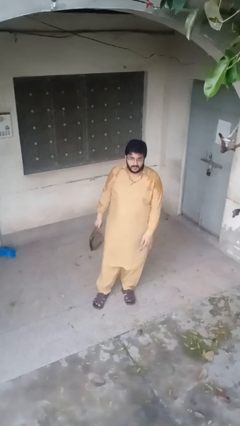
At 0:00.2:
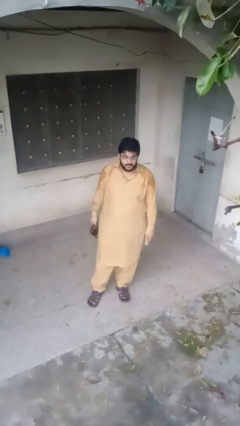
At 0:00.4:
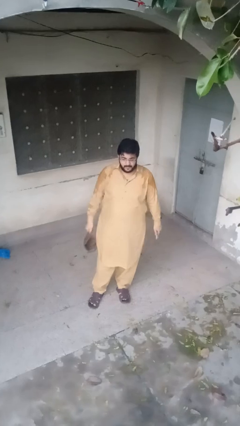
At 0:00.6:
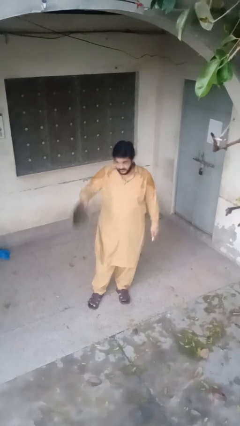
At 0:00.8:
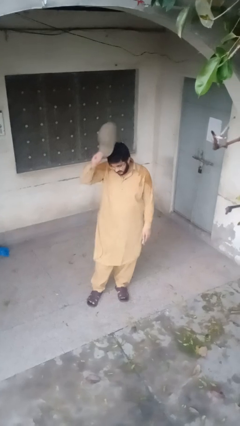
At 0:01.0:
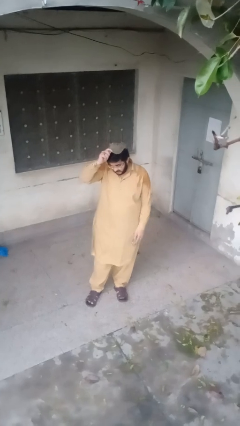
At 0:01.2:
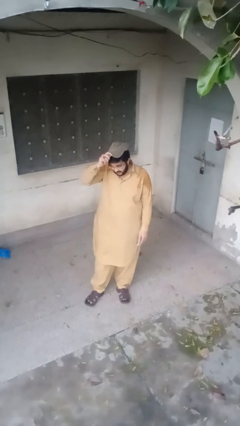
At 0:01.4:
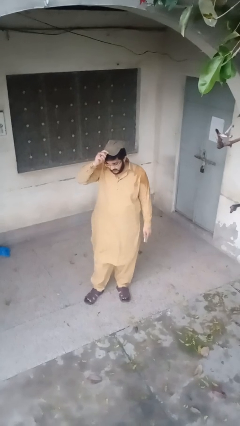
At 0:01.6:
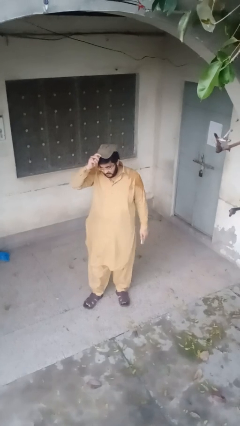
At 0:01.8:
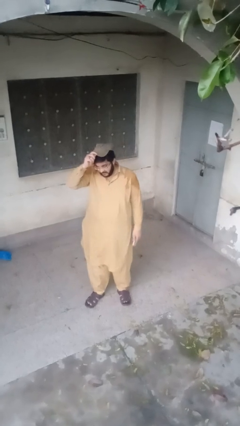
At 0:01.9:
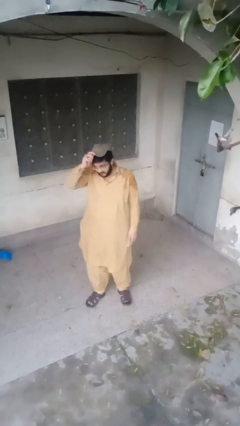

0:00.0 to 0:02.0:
person puts on hat

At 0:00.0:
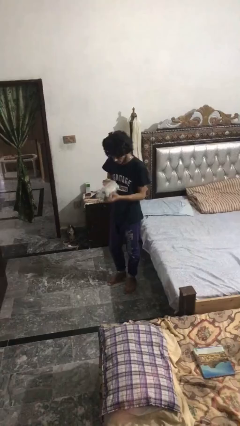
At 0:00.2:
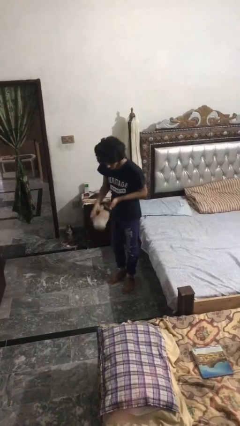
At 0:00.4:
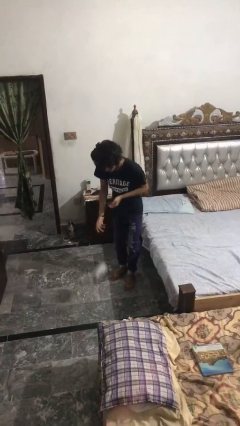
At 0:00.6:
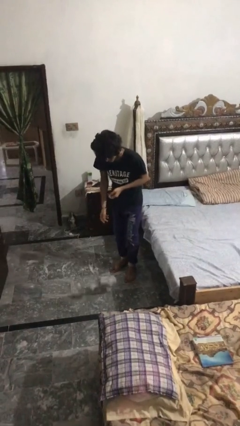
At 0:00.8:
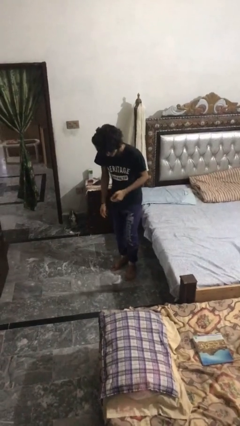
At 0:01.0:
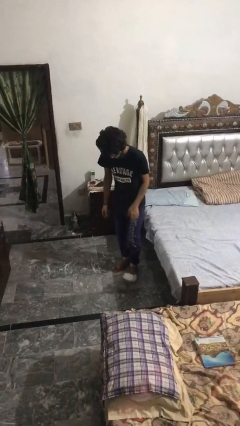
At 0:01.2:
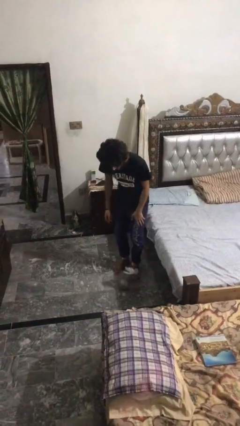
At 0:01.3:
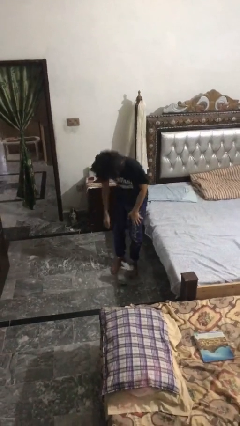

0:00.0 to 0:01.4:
person drops object

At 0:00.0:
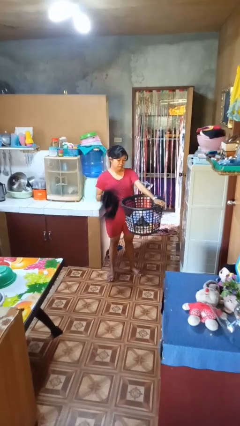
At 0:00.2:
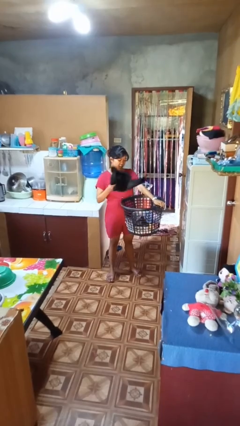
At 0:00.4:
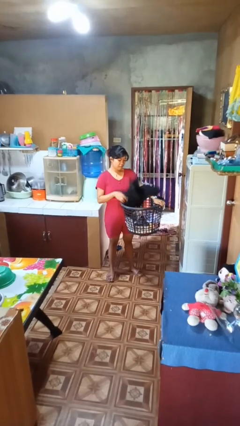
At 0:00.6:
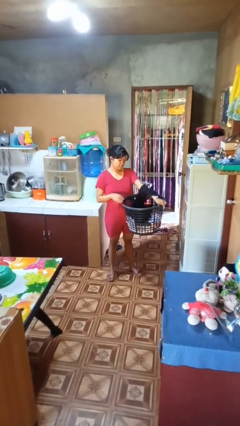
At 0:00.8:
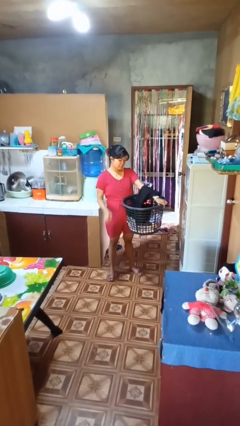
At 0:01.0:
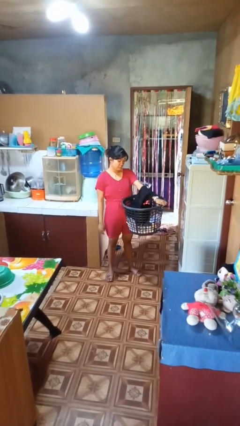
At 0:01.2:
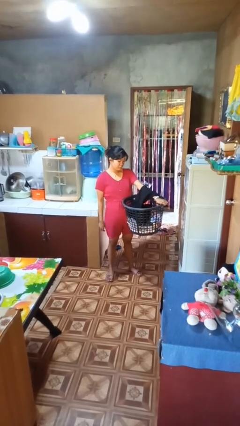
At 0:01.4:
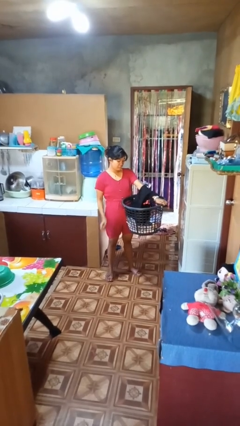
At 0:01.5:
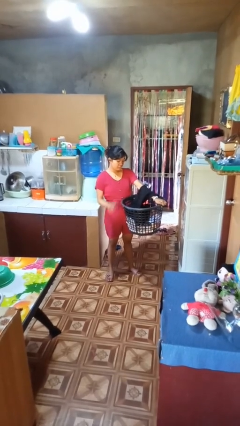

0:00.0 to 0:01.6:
person puts object into basket

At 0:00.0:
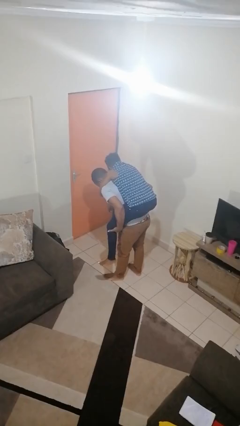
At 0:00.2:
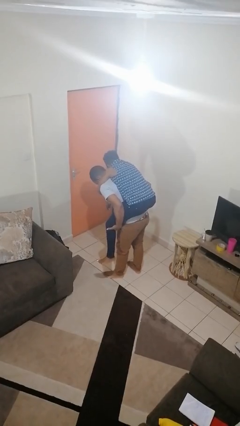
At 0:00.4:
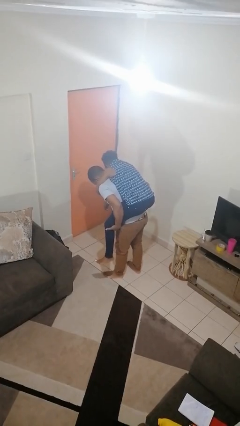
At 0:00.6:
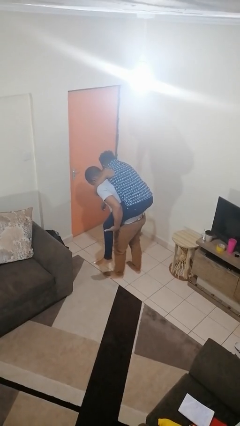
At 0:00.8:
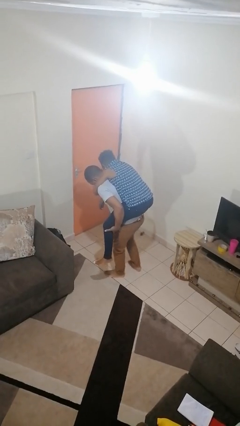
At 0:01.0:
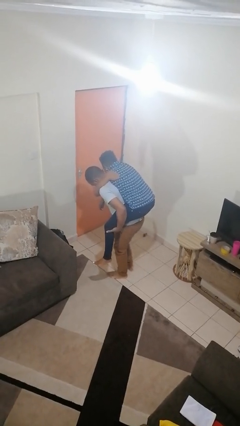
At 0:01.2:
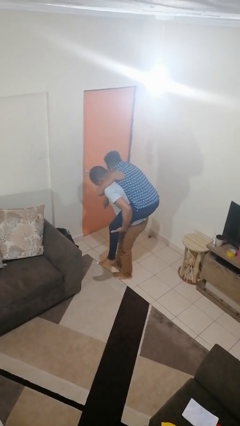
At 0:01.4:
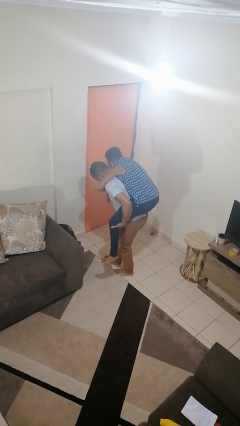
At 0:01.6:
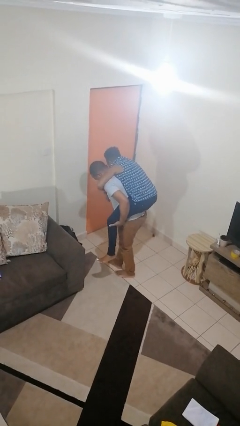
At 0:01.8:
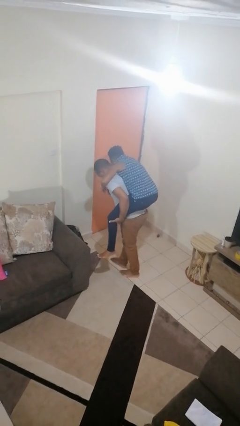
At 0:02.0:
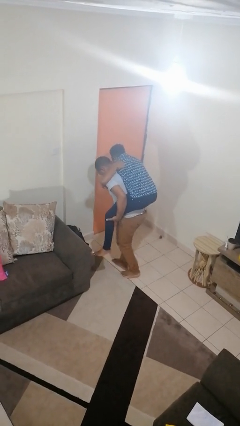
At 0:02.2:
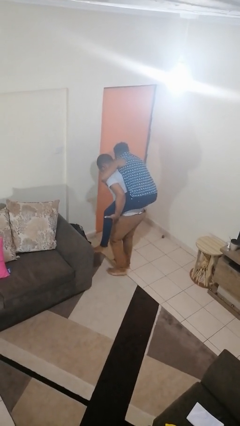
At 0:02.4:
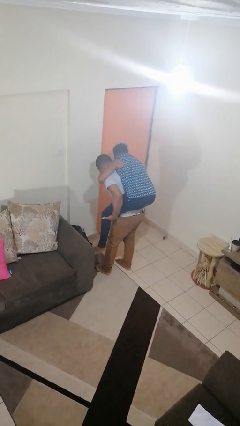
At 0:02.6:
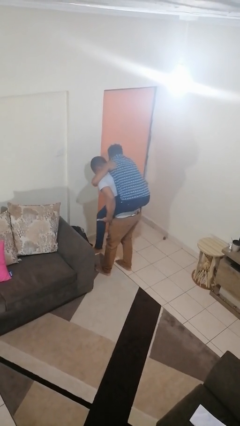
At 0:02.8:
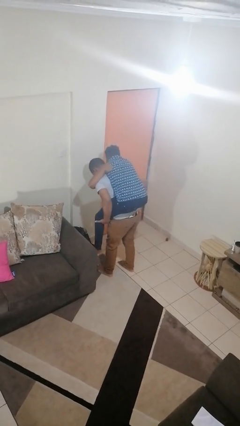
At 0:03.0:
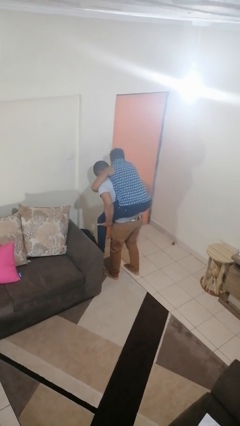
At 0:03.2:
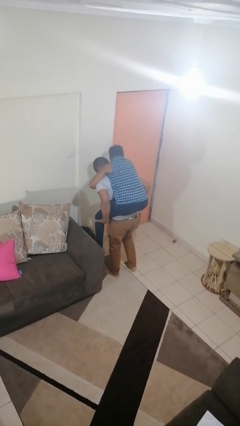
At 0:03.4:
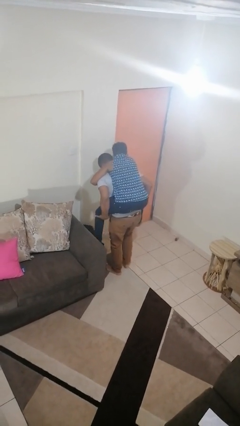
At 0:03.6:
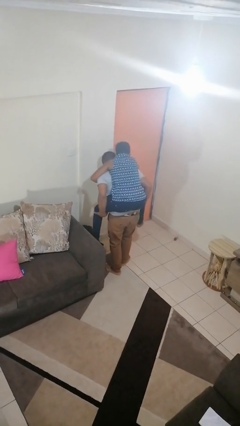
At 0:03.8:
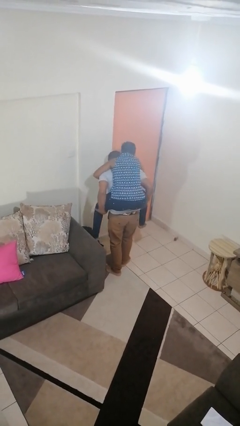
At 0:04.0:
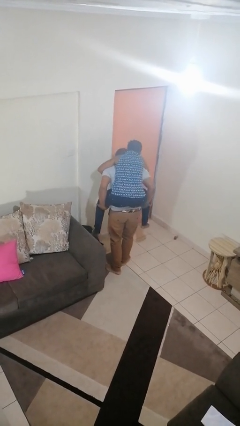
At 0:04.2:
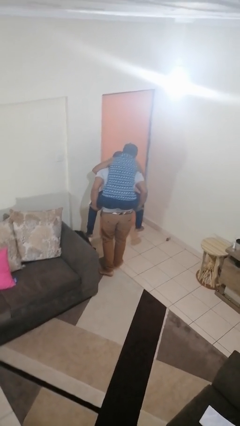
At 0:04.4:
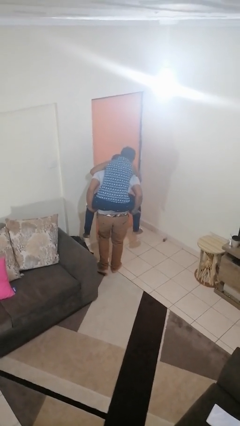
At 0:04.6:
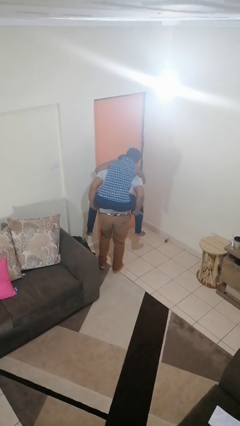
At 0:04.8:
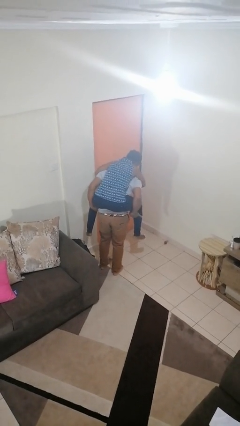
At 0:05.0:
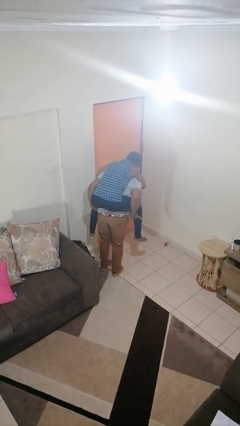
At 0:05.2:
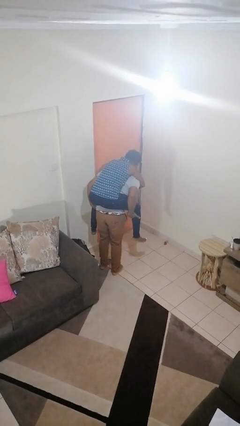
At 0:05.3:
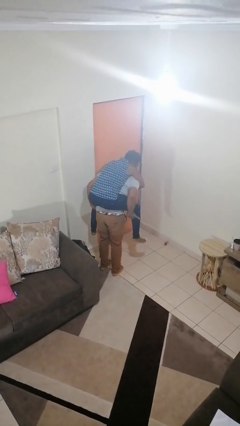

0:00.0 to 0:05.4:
person carries person on back

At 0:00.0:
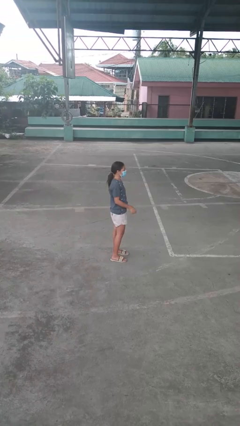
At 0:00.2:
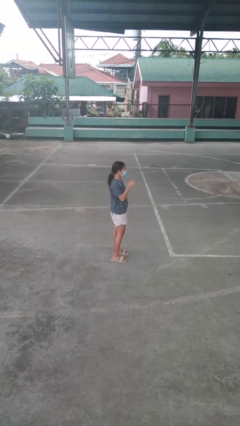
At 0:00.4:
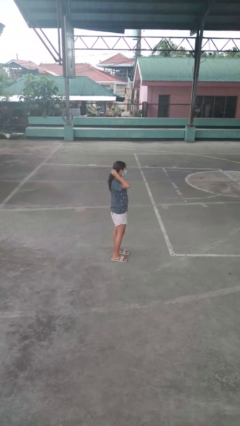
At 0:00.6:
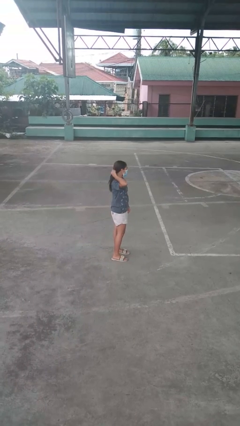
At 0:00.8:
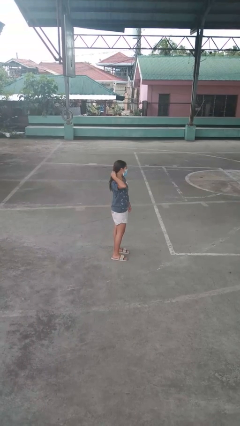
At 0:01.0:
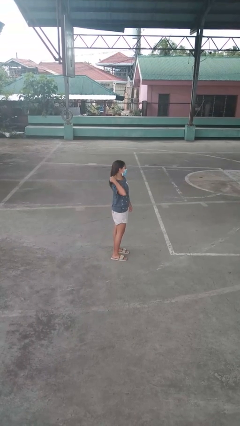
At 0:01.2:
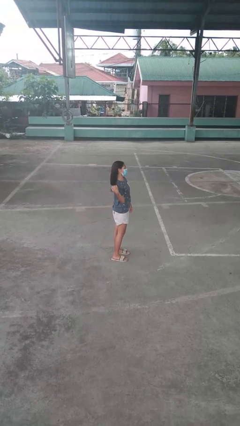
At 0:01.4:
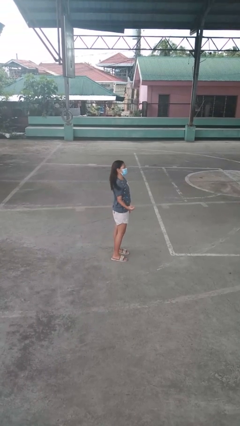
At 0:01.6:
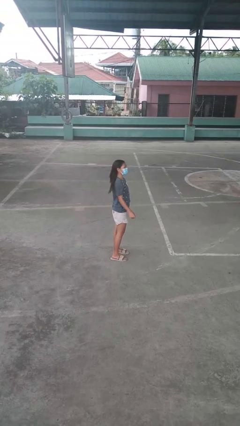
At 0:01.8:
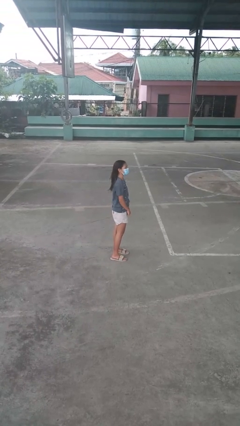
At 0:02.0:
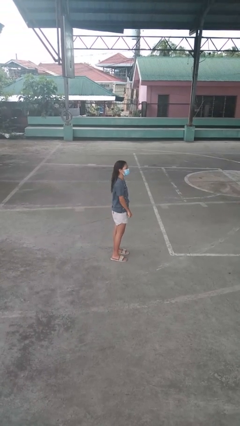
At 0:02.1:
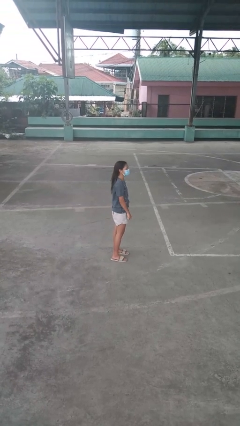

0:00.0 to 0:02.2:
person takes off hairtie

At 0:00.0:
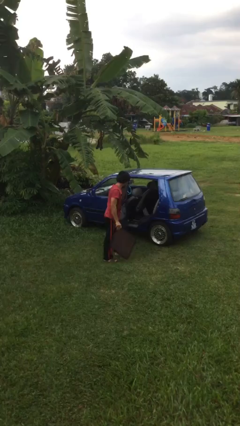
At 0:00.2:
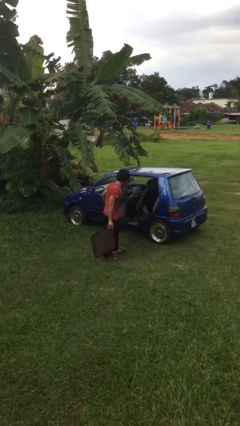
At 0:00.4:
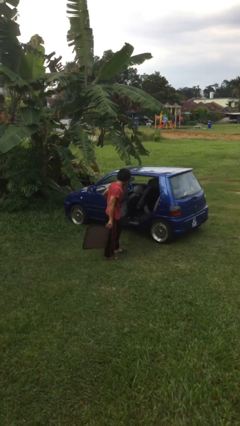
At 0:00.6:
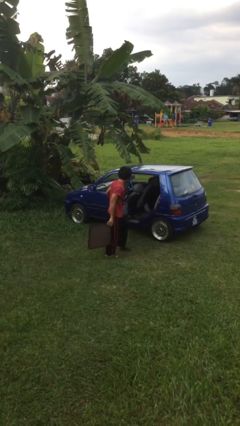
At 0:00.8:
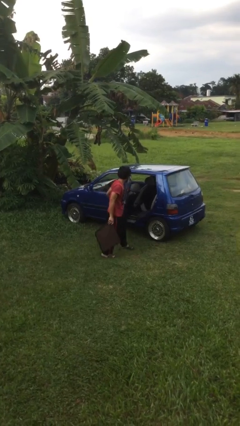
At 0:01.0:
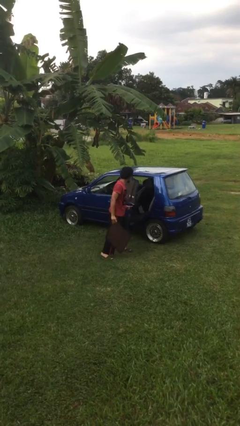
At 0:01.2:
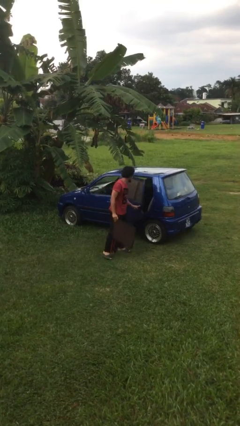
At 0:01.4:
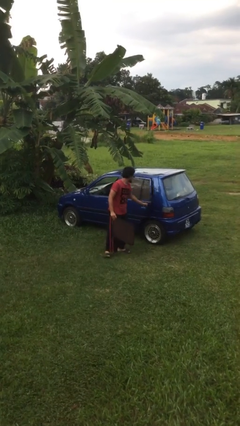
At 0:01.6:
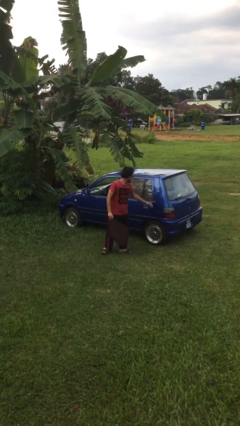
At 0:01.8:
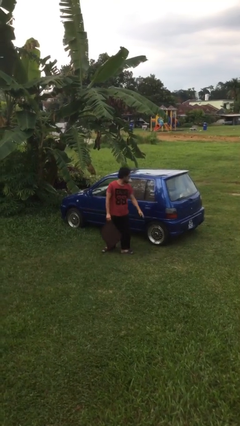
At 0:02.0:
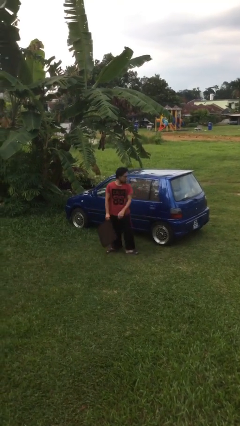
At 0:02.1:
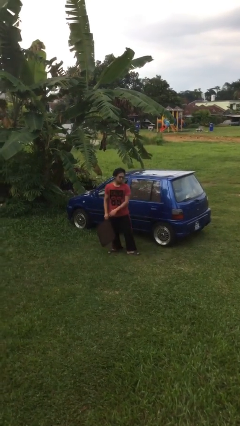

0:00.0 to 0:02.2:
person closes car door

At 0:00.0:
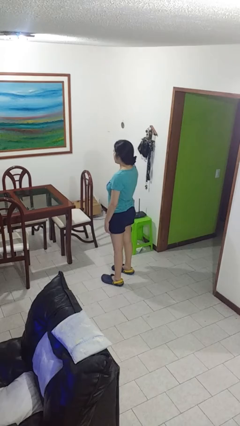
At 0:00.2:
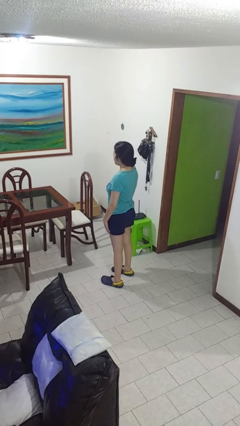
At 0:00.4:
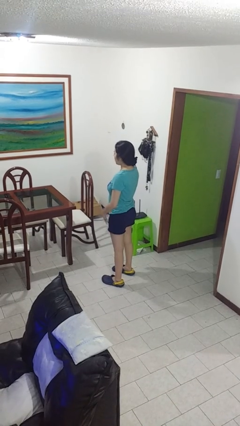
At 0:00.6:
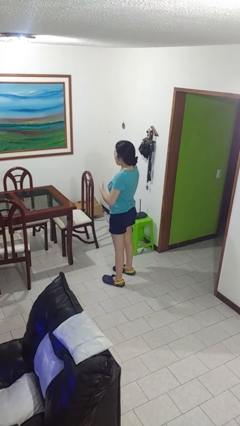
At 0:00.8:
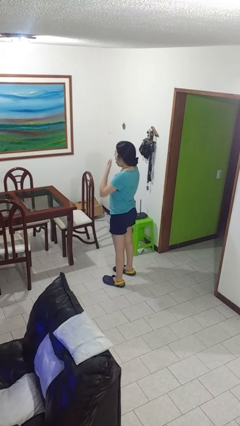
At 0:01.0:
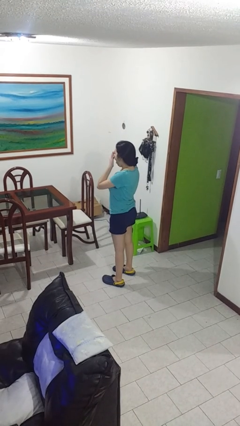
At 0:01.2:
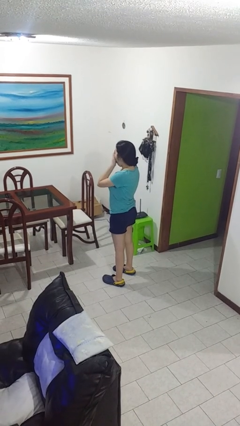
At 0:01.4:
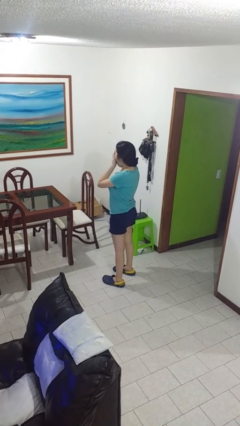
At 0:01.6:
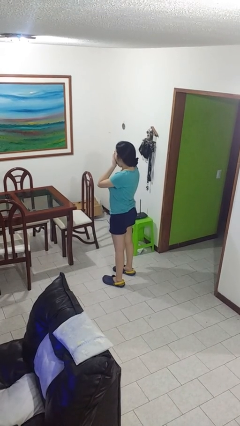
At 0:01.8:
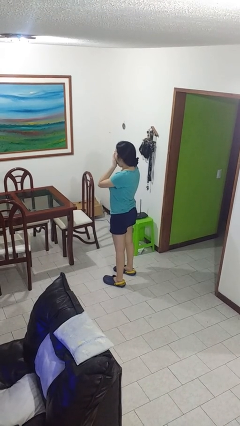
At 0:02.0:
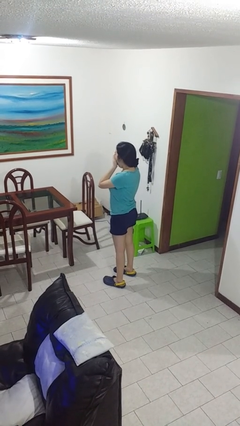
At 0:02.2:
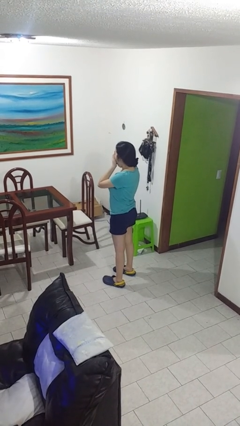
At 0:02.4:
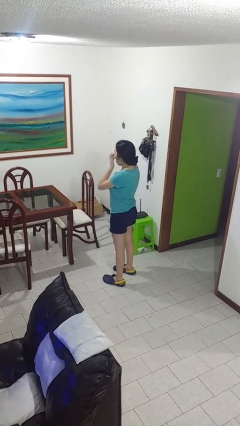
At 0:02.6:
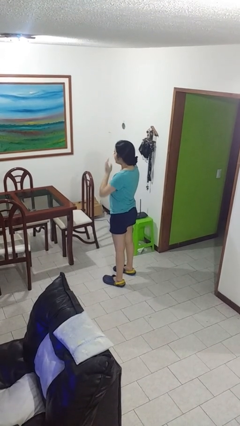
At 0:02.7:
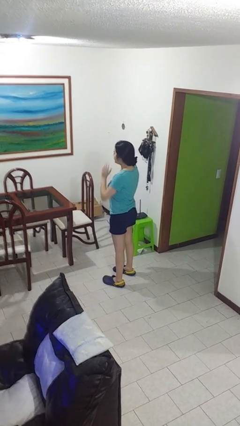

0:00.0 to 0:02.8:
person yawns
